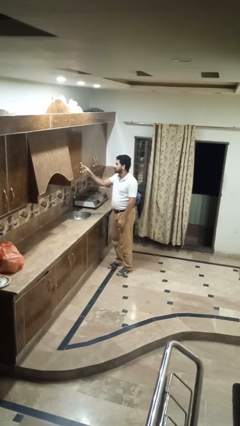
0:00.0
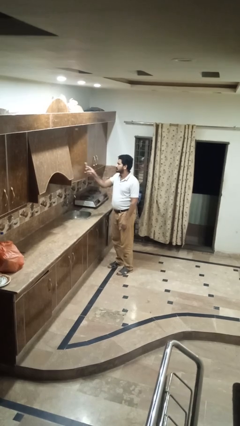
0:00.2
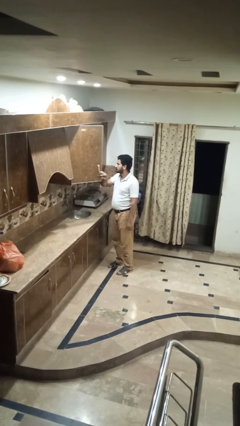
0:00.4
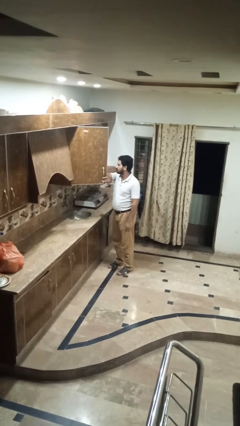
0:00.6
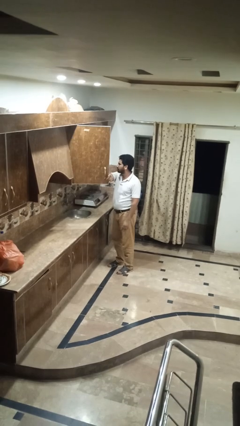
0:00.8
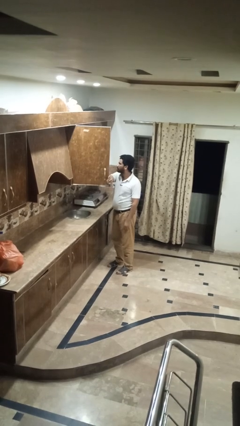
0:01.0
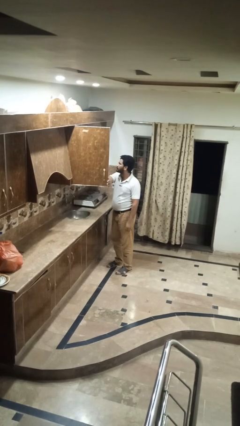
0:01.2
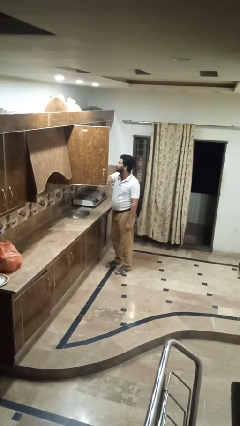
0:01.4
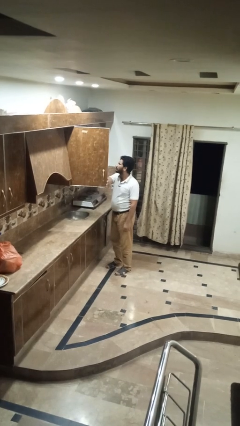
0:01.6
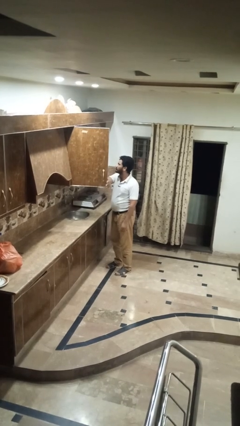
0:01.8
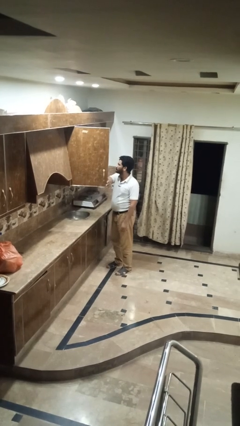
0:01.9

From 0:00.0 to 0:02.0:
person opens kitchen drawer

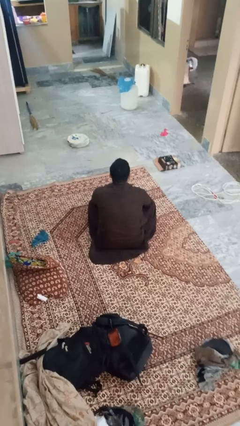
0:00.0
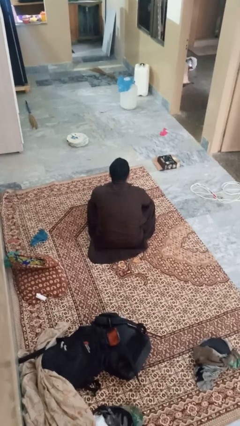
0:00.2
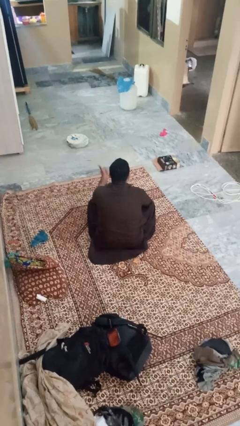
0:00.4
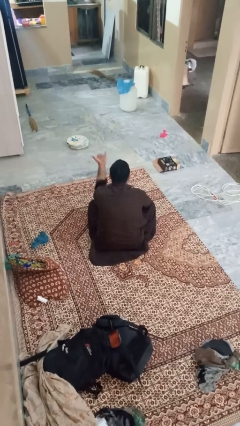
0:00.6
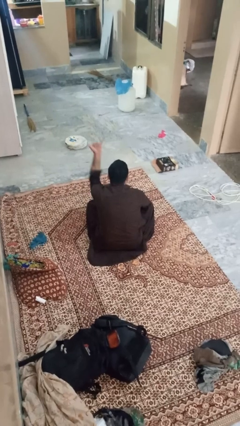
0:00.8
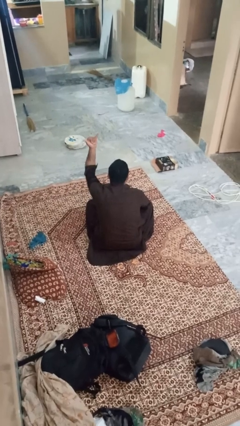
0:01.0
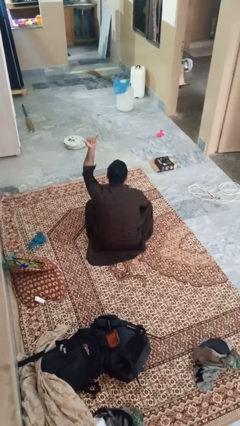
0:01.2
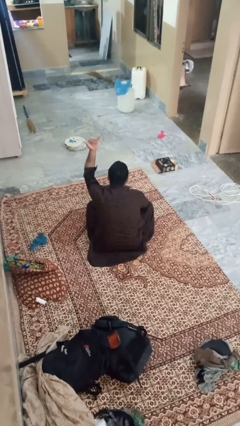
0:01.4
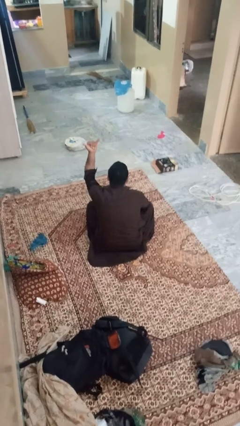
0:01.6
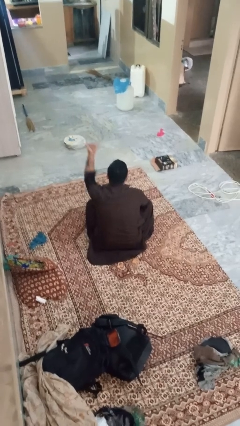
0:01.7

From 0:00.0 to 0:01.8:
person gestures hang loose

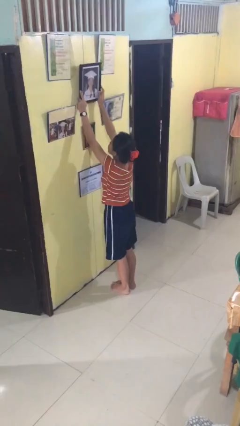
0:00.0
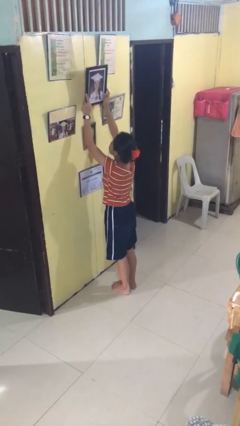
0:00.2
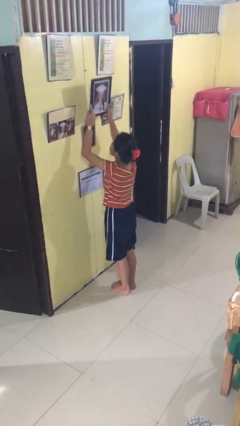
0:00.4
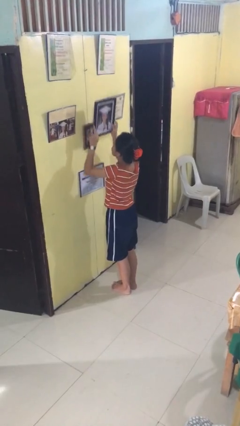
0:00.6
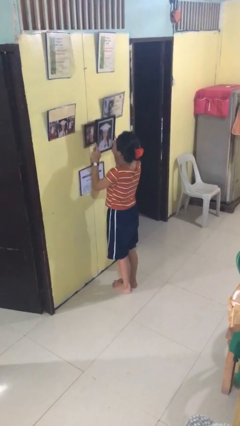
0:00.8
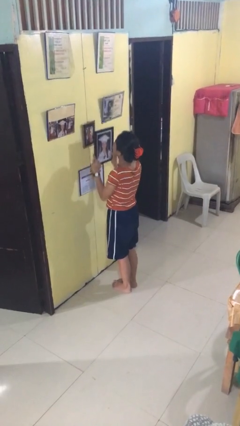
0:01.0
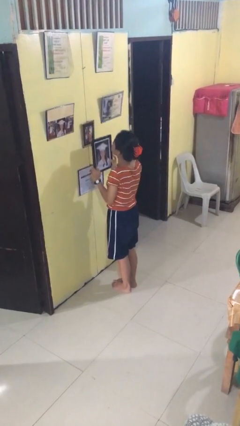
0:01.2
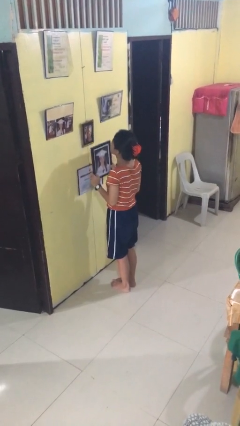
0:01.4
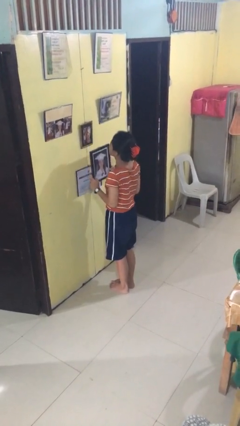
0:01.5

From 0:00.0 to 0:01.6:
person takes down picture frame

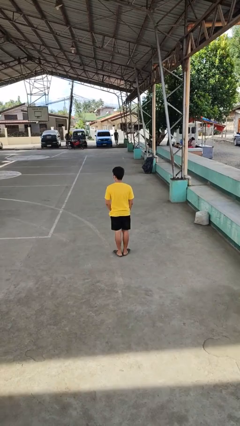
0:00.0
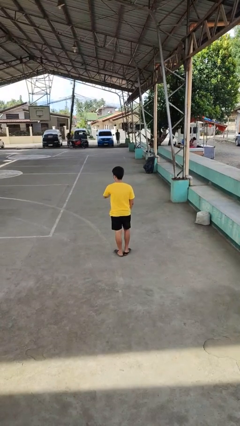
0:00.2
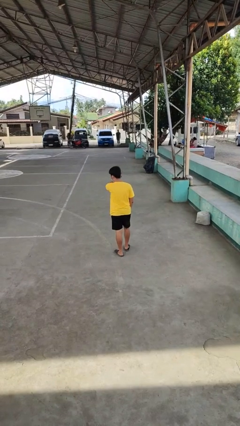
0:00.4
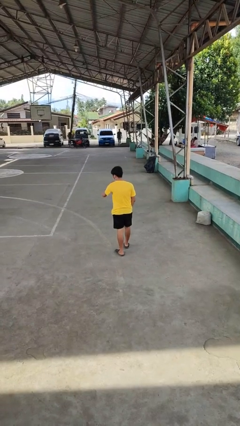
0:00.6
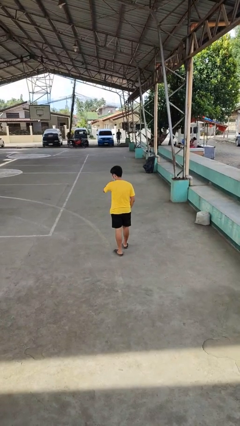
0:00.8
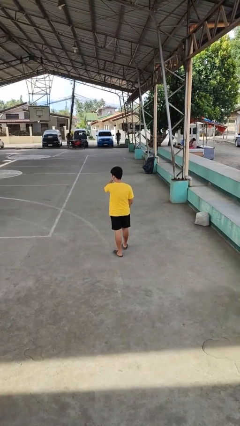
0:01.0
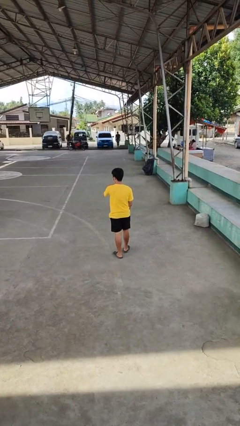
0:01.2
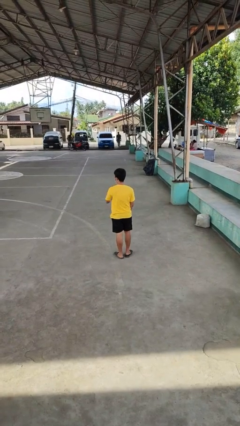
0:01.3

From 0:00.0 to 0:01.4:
person karate chop

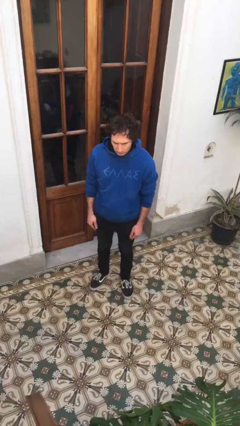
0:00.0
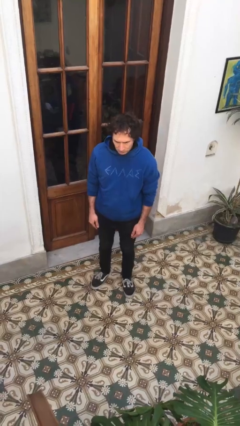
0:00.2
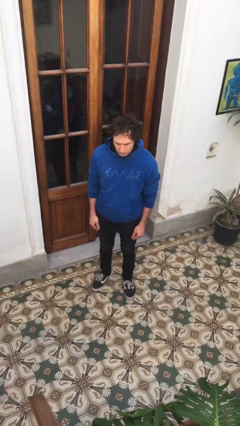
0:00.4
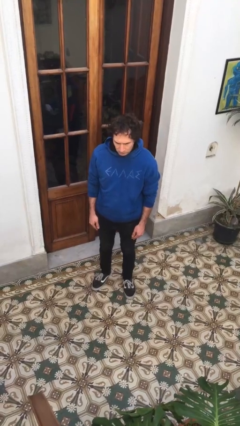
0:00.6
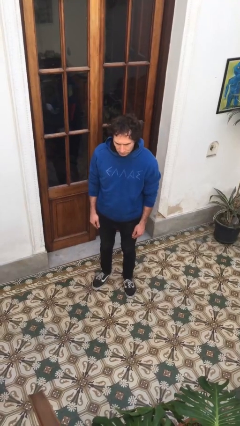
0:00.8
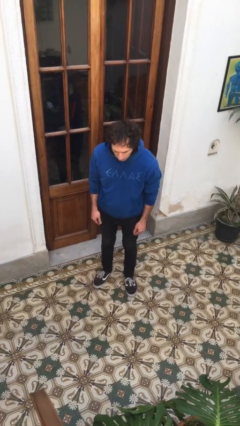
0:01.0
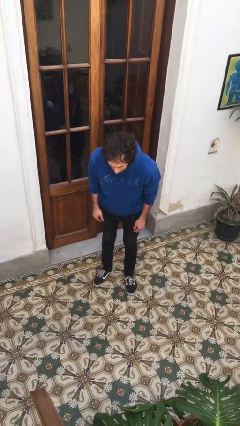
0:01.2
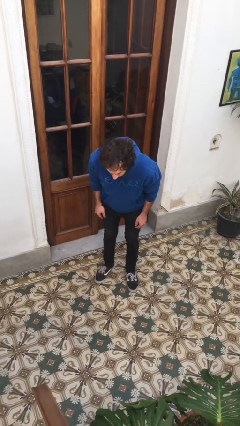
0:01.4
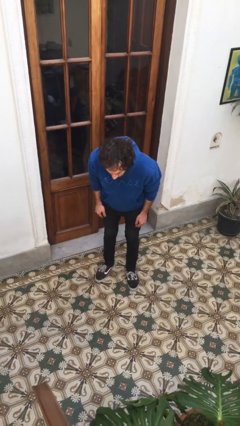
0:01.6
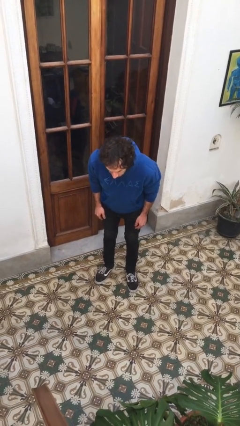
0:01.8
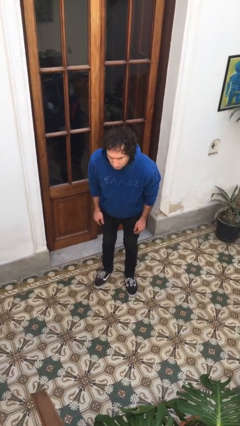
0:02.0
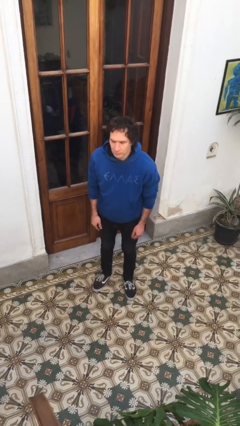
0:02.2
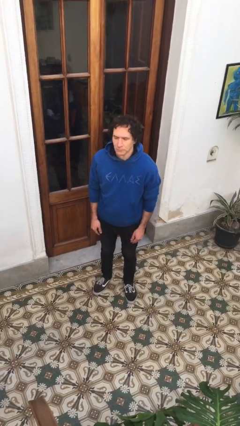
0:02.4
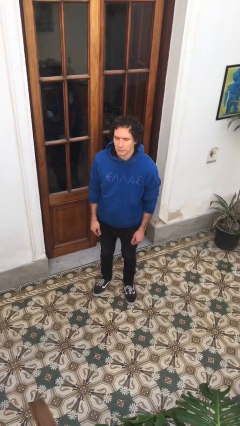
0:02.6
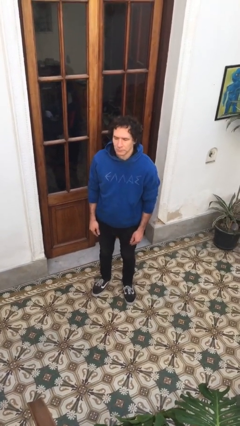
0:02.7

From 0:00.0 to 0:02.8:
person bows

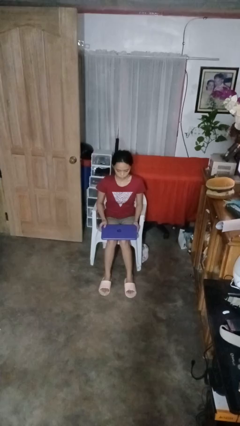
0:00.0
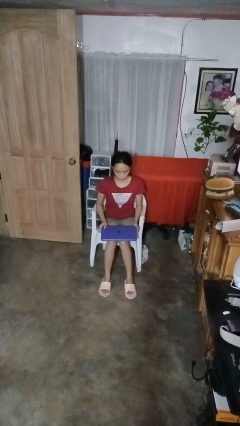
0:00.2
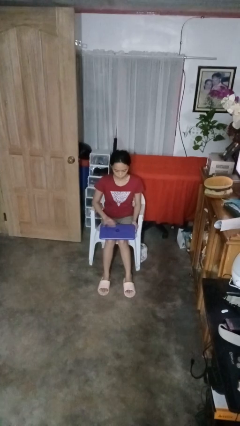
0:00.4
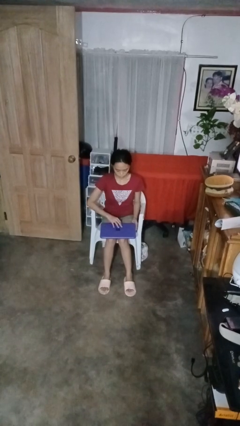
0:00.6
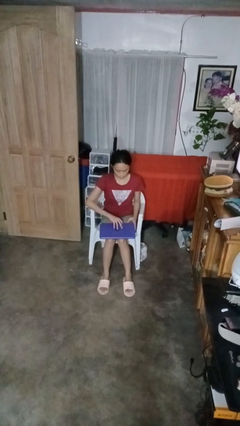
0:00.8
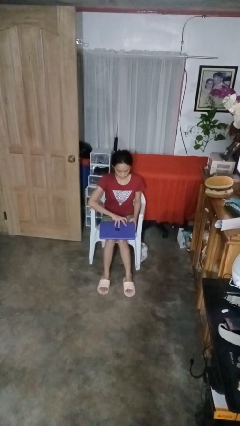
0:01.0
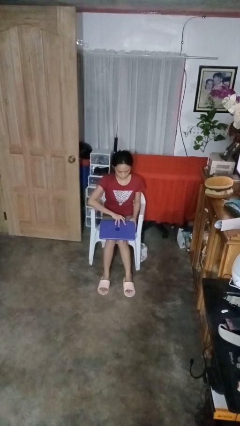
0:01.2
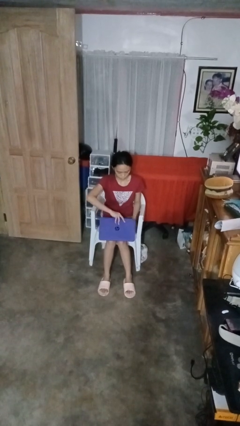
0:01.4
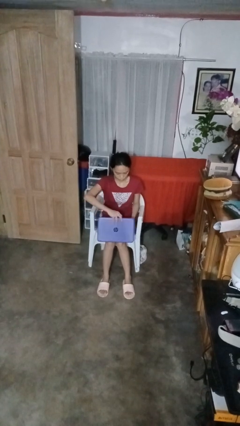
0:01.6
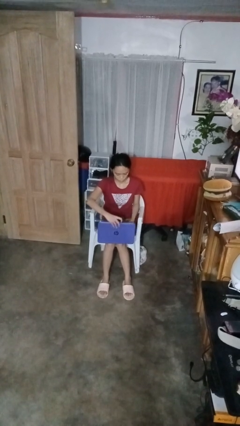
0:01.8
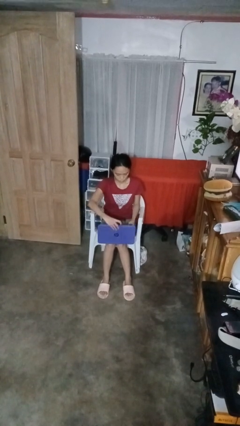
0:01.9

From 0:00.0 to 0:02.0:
person opens laptop

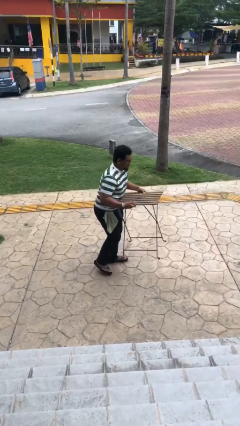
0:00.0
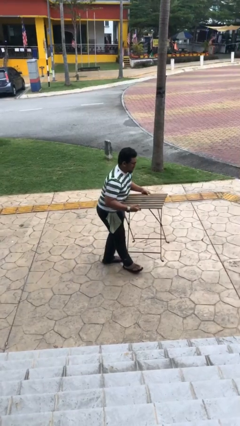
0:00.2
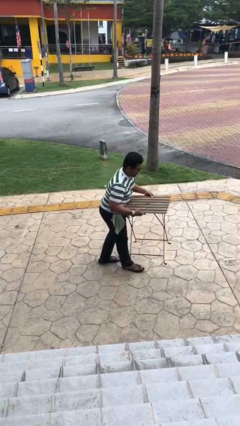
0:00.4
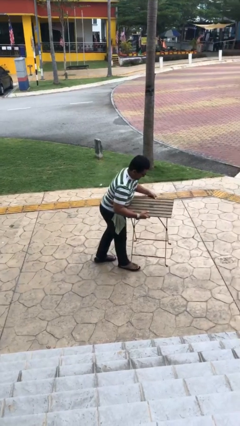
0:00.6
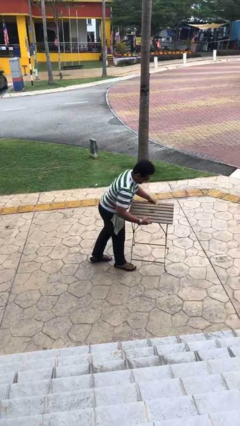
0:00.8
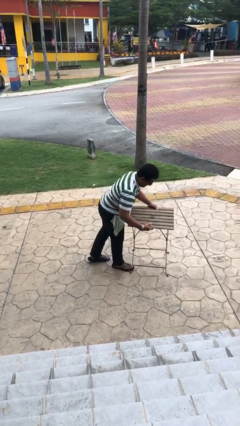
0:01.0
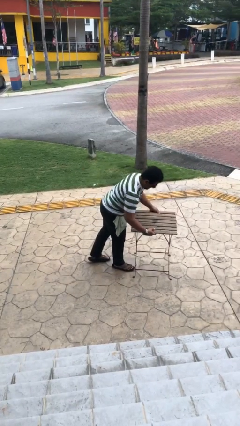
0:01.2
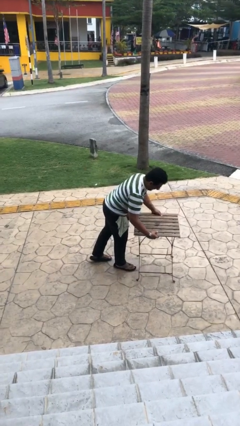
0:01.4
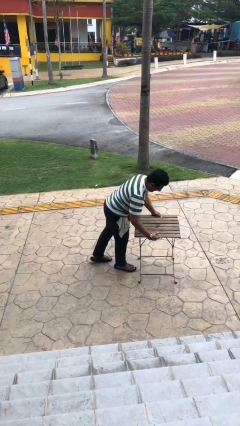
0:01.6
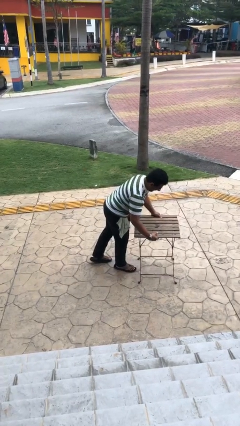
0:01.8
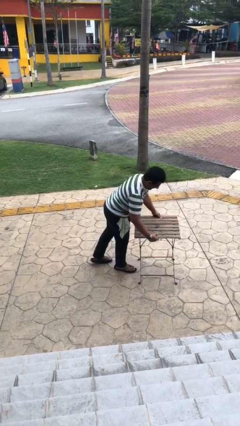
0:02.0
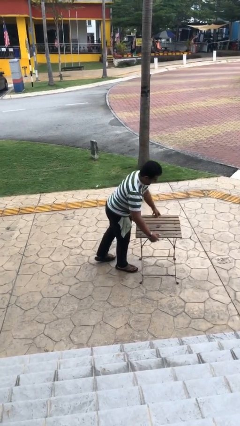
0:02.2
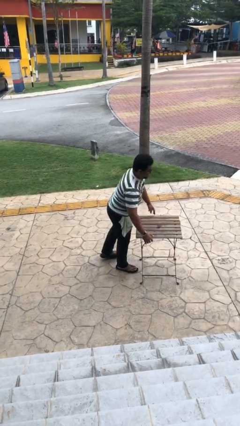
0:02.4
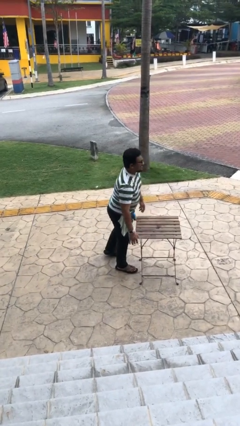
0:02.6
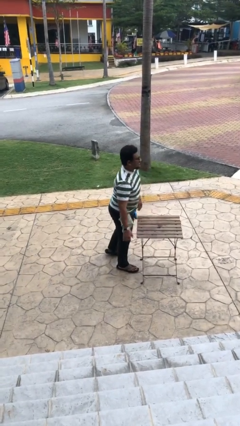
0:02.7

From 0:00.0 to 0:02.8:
person puts down object on floor

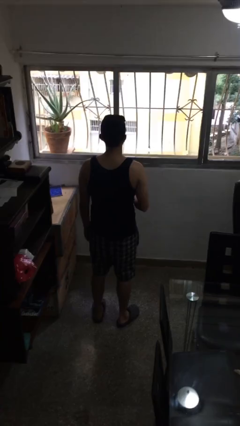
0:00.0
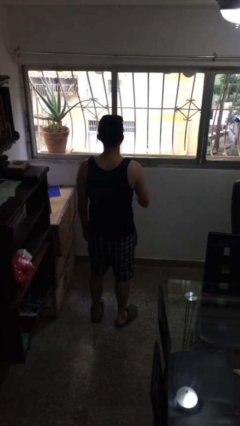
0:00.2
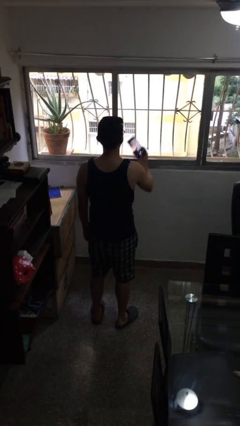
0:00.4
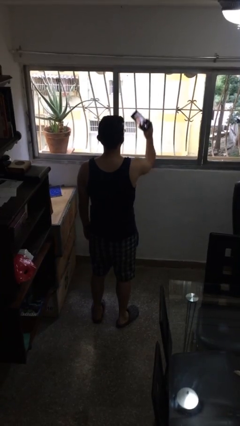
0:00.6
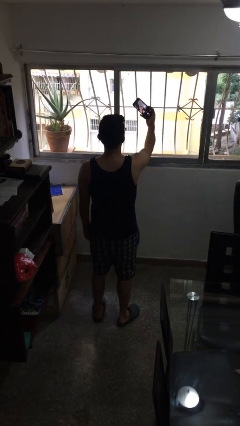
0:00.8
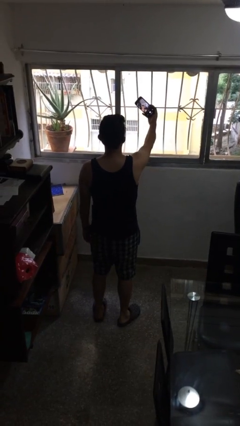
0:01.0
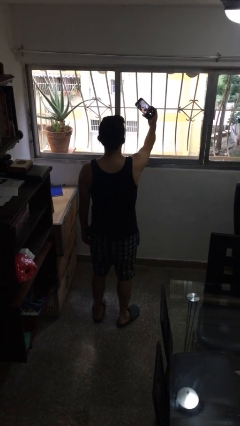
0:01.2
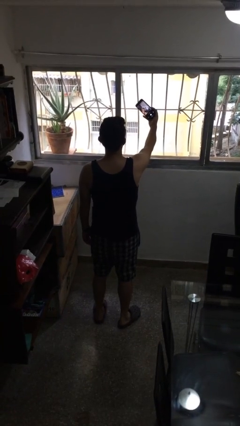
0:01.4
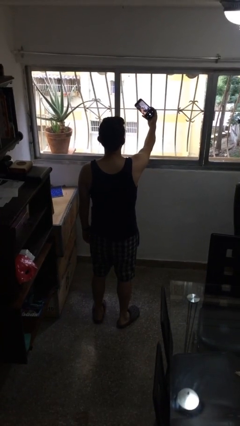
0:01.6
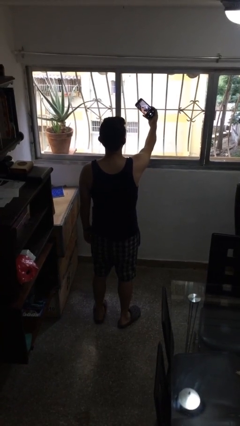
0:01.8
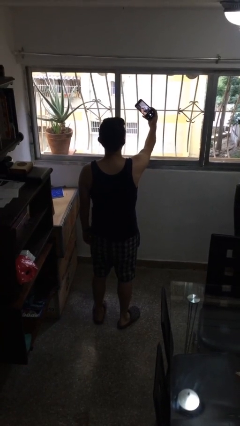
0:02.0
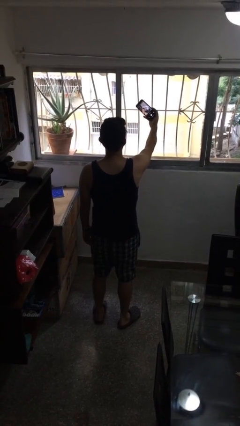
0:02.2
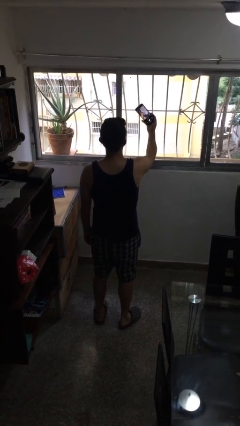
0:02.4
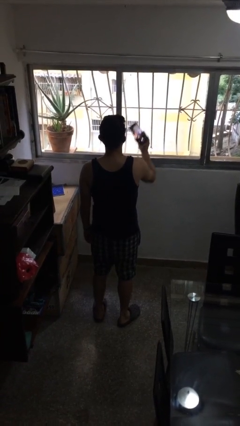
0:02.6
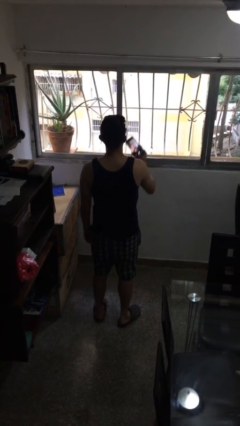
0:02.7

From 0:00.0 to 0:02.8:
person takes selfie
